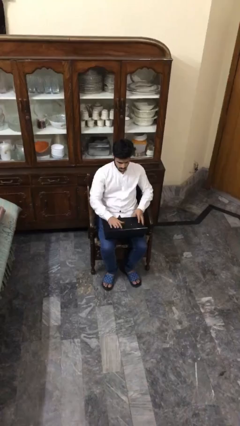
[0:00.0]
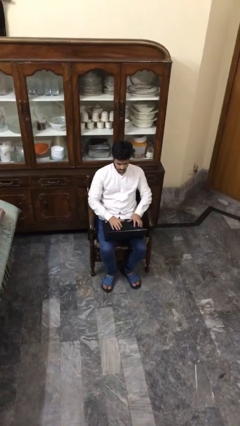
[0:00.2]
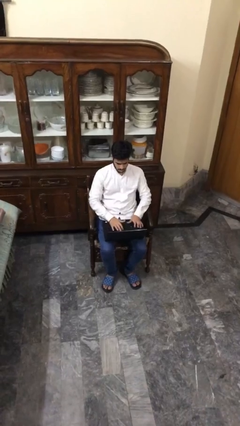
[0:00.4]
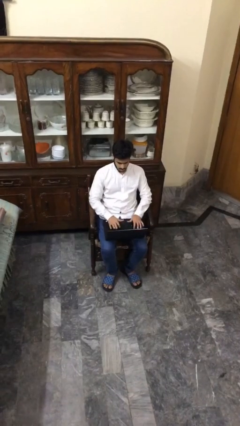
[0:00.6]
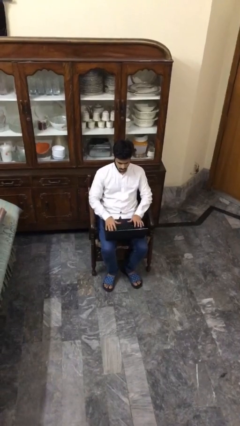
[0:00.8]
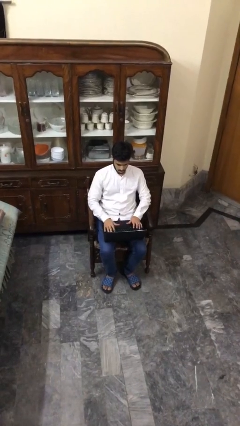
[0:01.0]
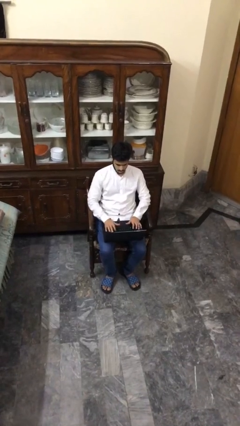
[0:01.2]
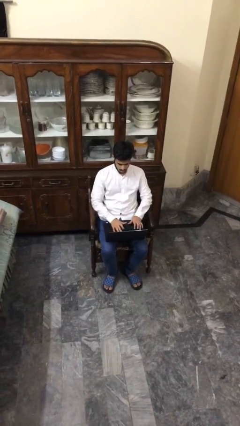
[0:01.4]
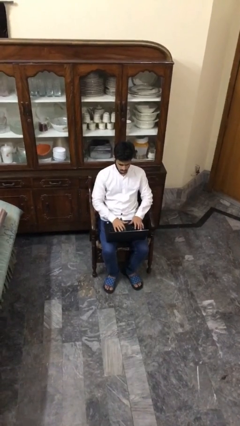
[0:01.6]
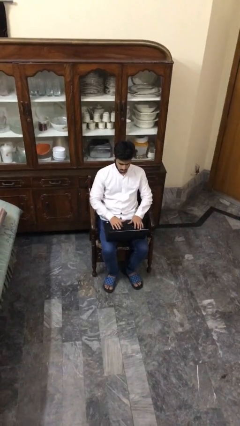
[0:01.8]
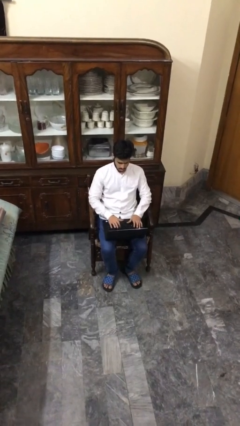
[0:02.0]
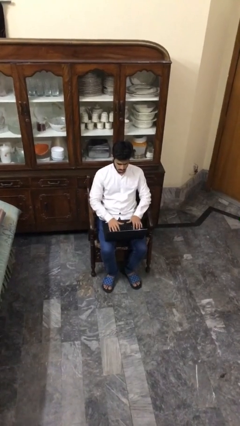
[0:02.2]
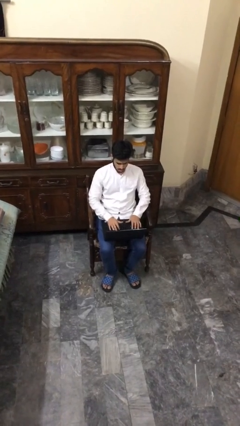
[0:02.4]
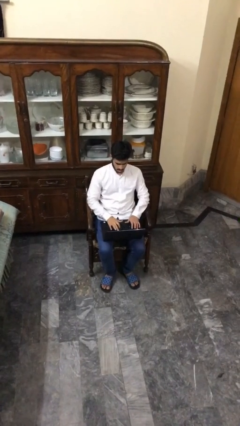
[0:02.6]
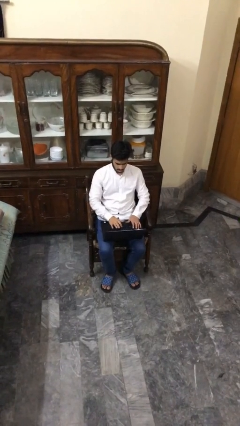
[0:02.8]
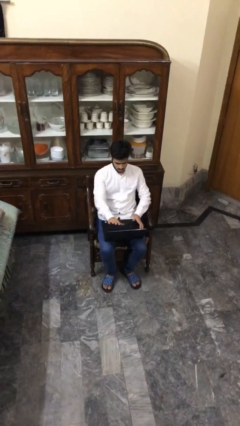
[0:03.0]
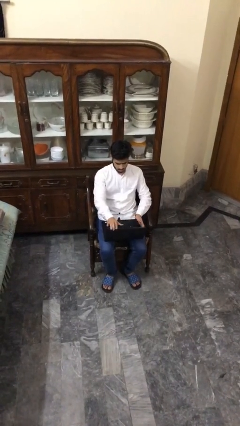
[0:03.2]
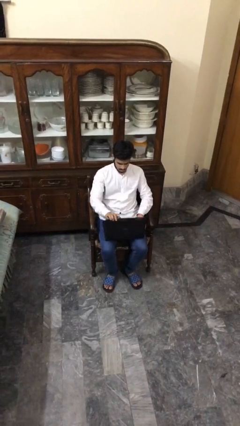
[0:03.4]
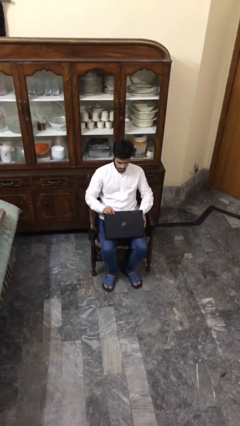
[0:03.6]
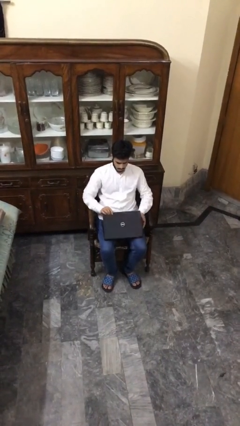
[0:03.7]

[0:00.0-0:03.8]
person interacts with laptop

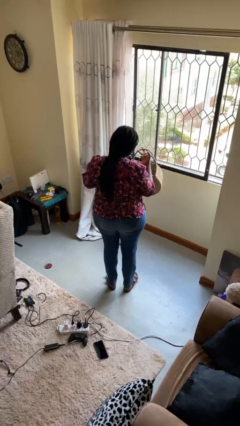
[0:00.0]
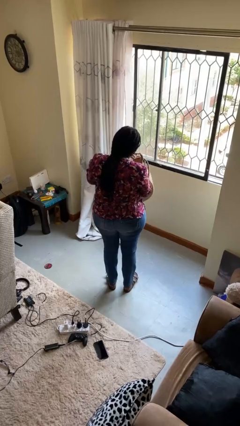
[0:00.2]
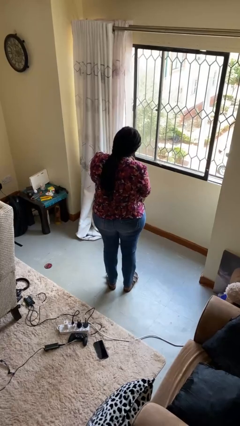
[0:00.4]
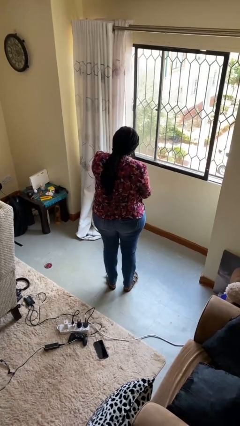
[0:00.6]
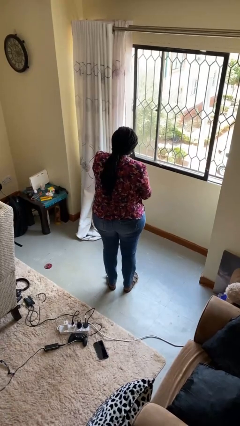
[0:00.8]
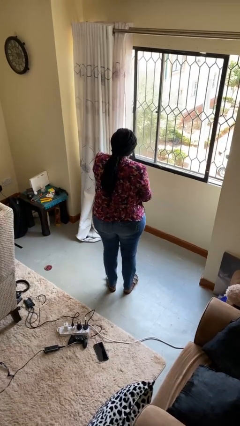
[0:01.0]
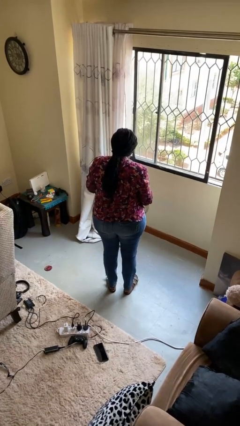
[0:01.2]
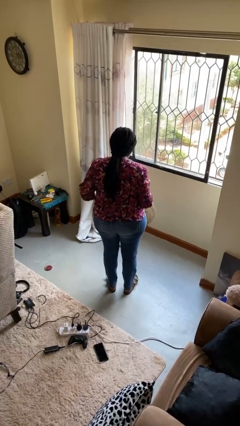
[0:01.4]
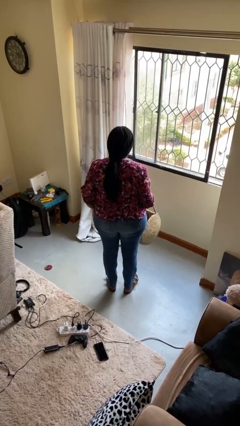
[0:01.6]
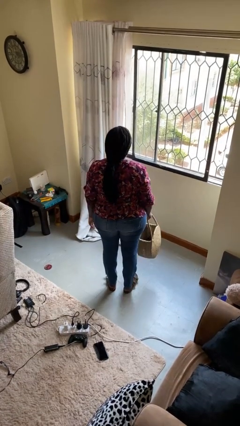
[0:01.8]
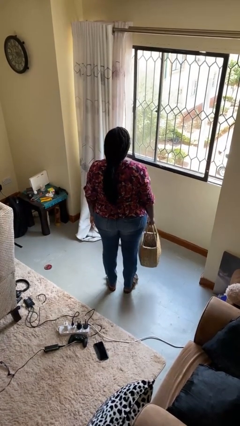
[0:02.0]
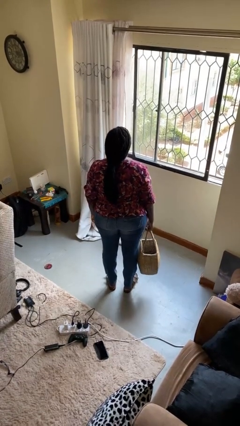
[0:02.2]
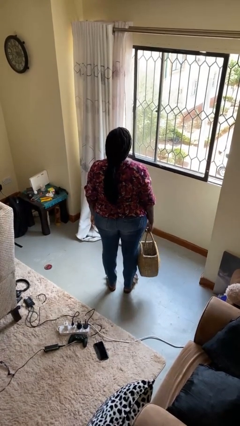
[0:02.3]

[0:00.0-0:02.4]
person puts object into basket

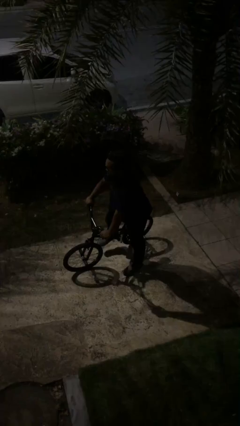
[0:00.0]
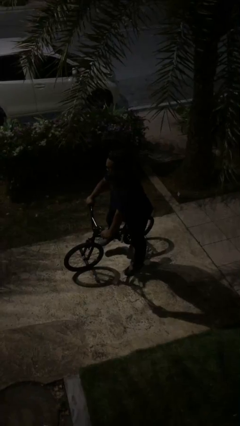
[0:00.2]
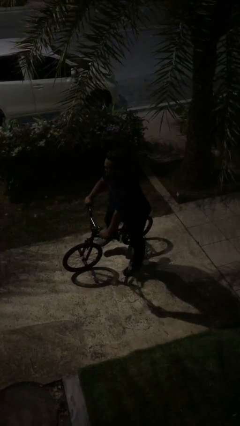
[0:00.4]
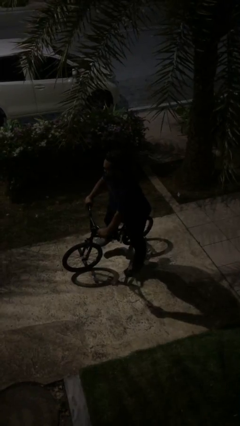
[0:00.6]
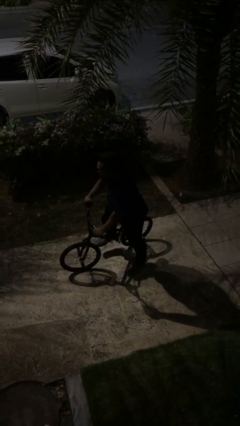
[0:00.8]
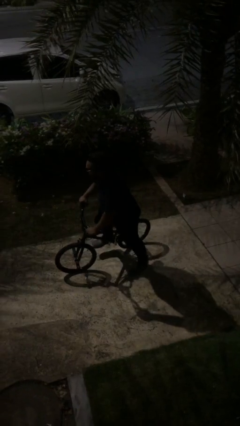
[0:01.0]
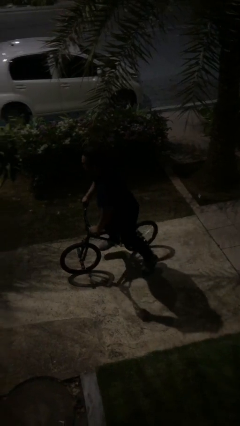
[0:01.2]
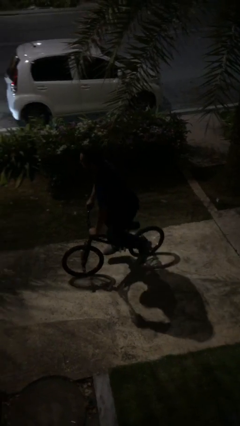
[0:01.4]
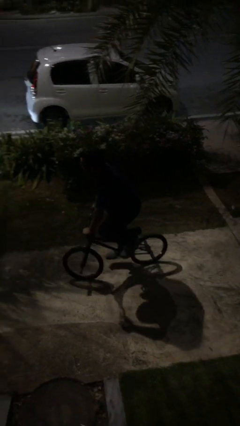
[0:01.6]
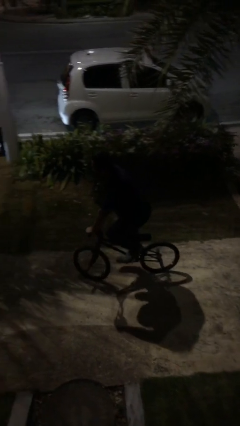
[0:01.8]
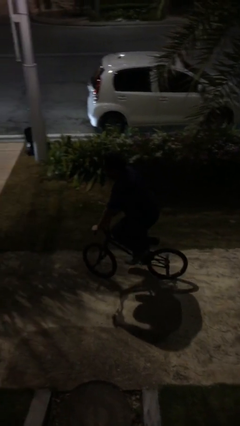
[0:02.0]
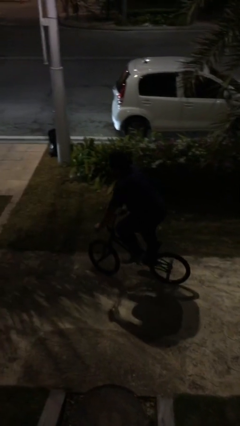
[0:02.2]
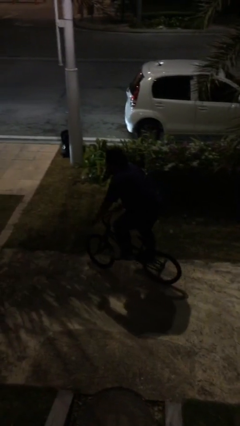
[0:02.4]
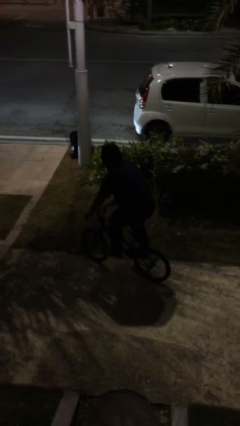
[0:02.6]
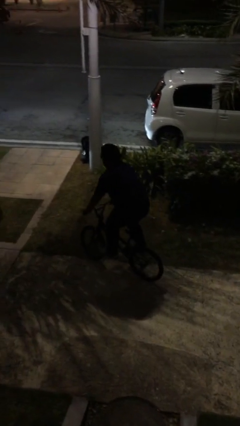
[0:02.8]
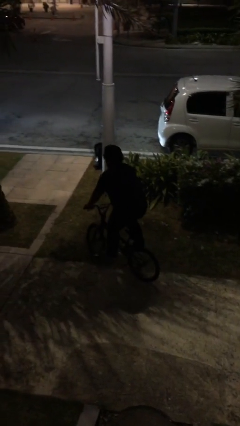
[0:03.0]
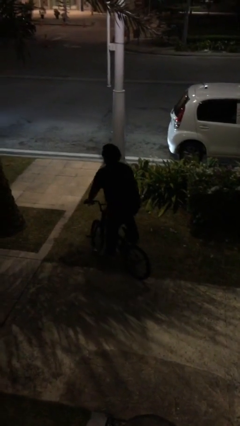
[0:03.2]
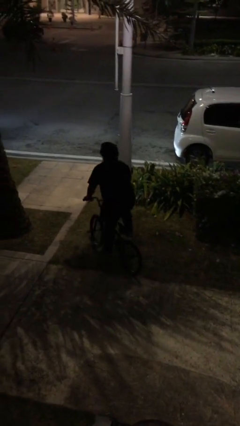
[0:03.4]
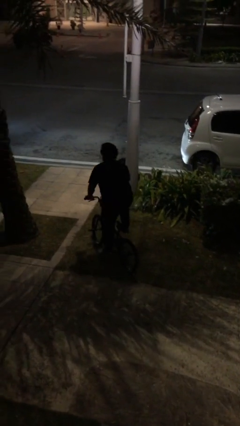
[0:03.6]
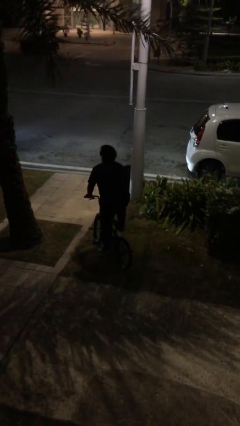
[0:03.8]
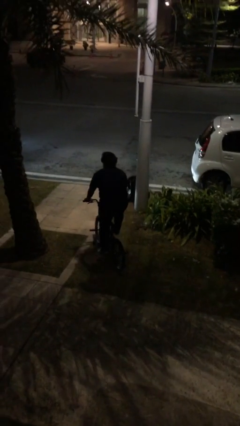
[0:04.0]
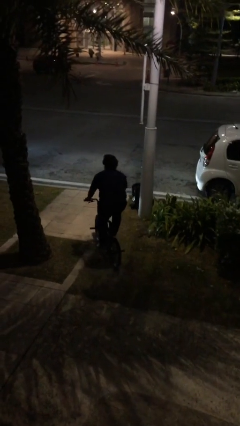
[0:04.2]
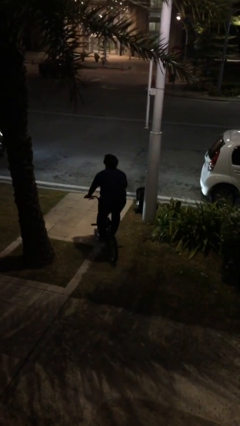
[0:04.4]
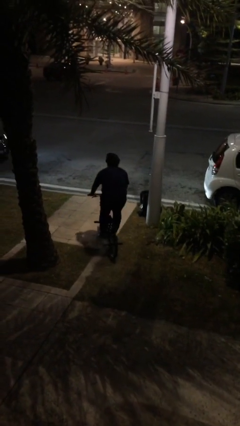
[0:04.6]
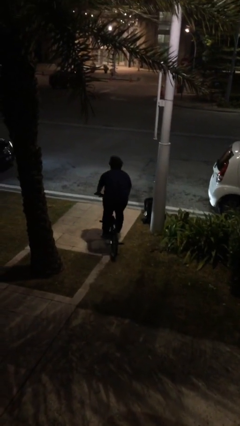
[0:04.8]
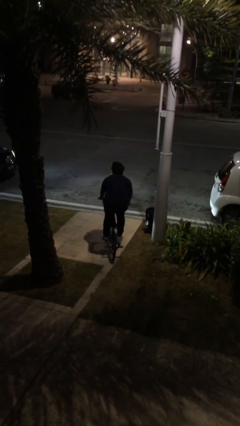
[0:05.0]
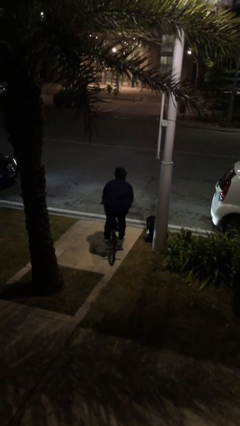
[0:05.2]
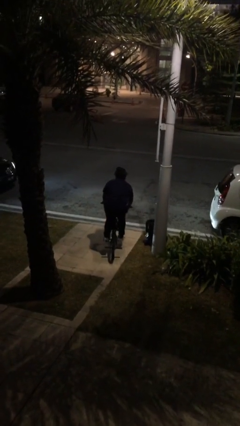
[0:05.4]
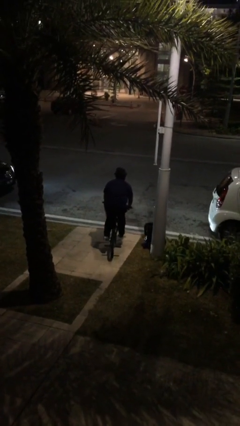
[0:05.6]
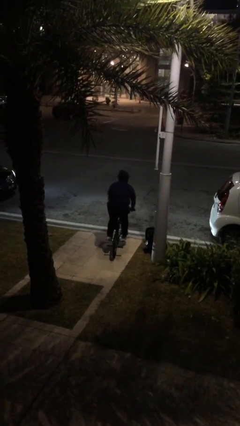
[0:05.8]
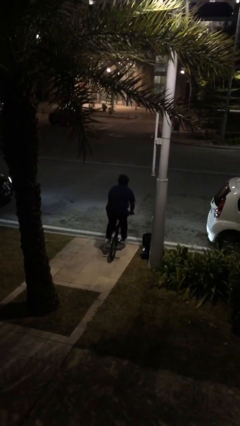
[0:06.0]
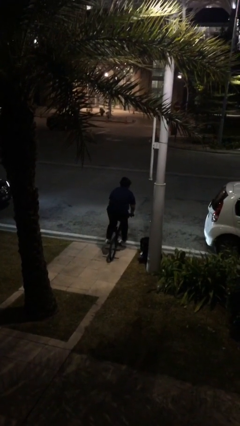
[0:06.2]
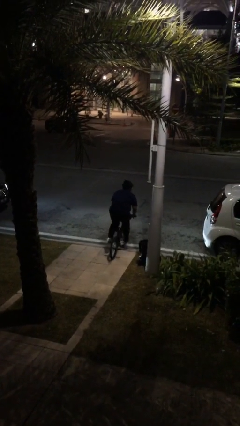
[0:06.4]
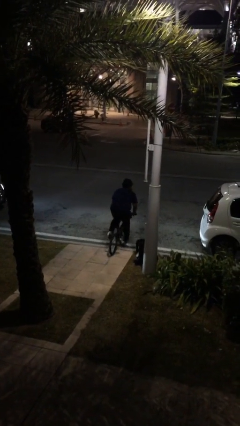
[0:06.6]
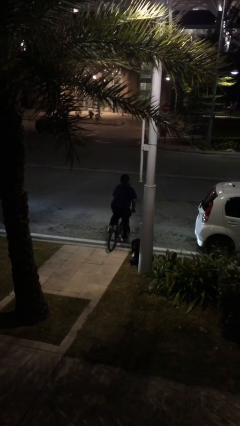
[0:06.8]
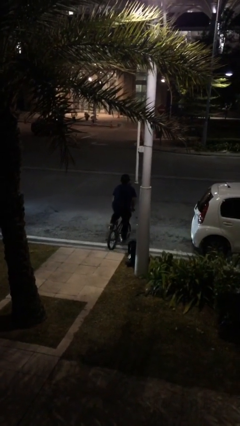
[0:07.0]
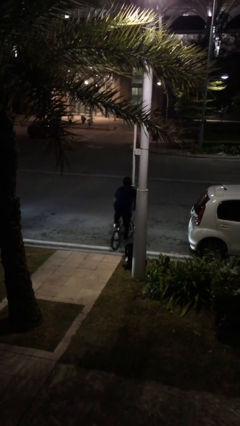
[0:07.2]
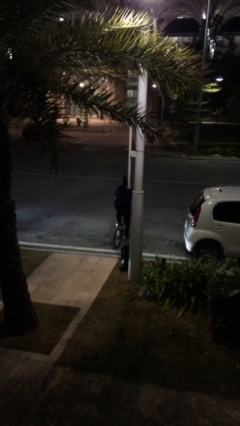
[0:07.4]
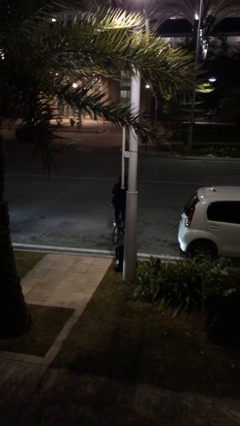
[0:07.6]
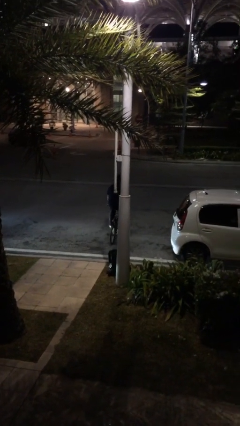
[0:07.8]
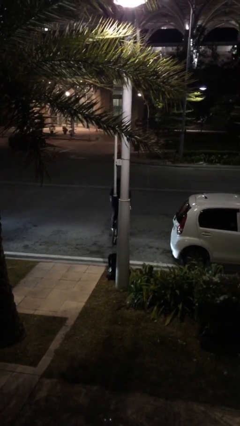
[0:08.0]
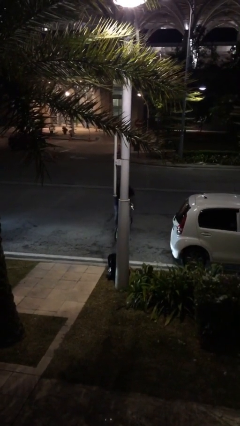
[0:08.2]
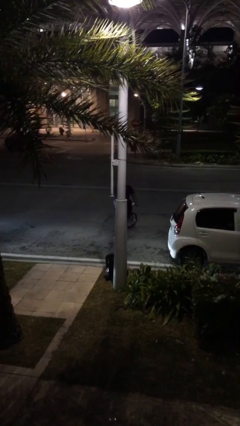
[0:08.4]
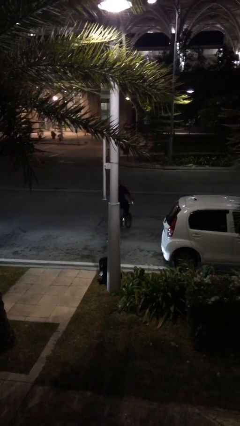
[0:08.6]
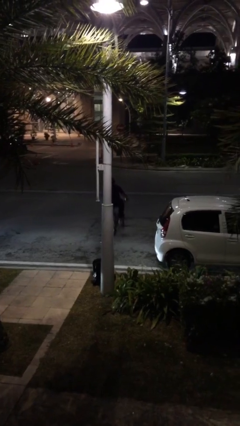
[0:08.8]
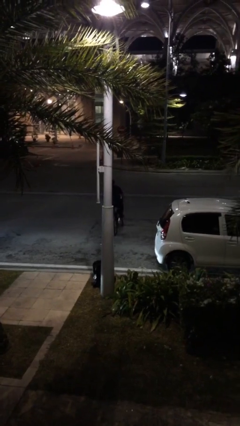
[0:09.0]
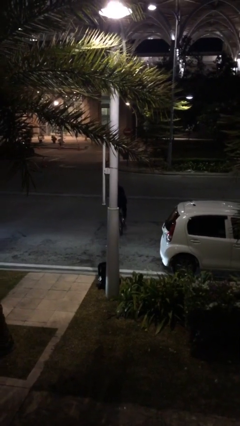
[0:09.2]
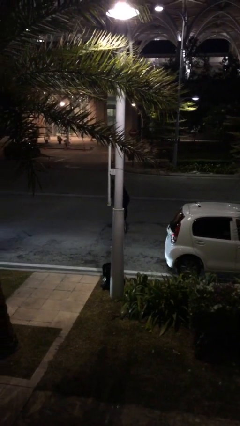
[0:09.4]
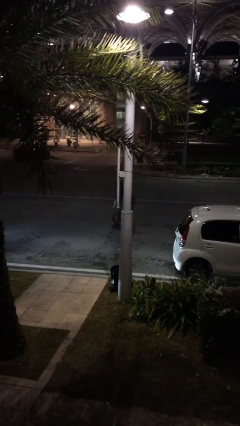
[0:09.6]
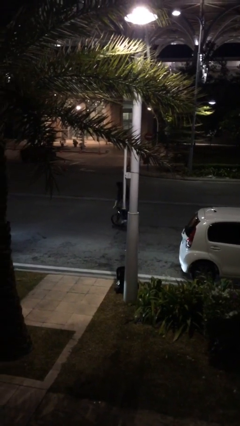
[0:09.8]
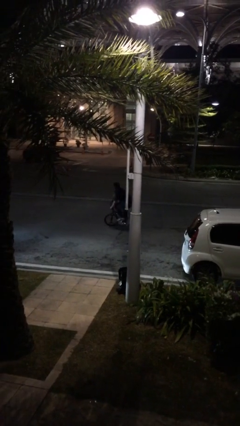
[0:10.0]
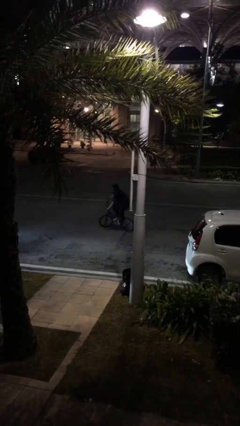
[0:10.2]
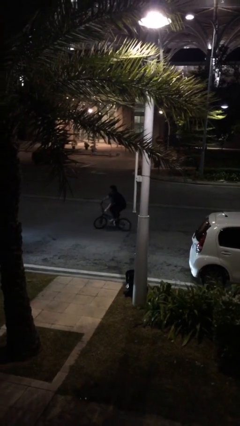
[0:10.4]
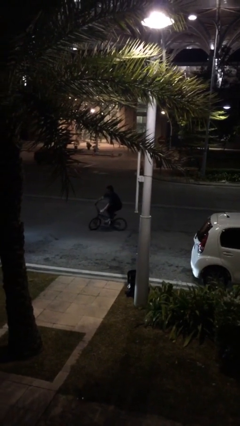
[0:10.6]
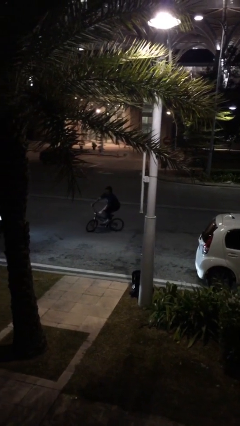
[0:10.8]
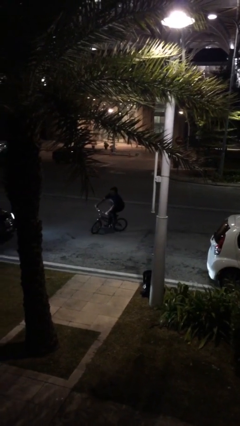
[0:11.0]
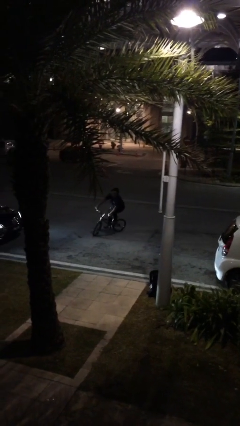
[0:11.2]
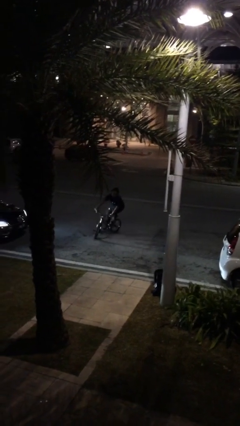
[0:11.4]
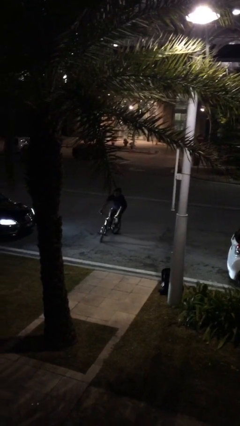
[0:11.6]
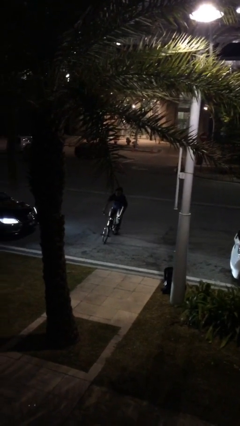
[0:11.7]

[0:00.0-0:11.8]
person rides bicycle

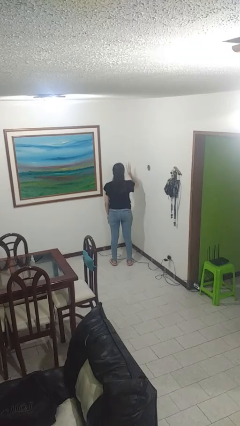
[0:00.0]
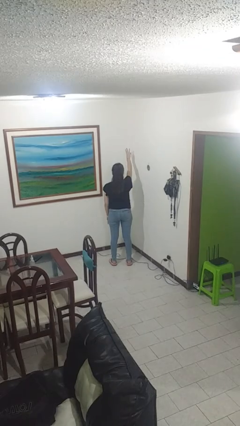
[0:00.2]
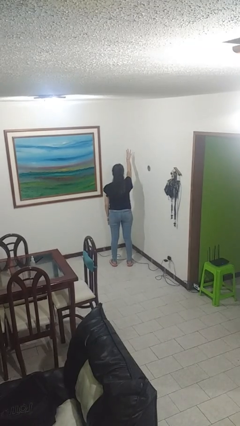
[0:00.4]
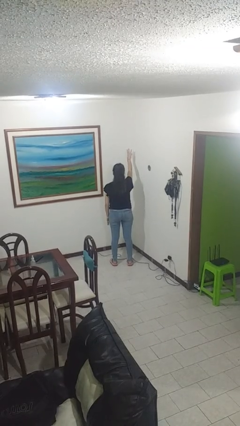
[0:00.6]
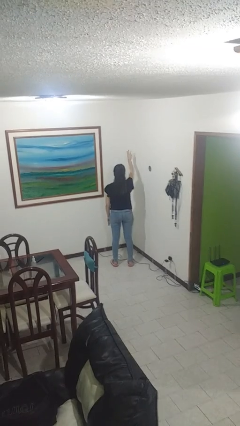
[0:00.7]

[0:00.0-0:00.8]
person gestures number three
